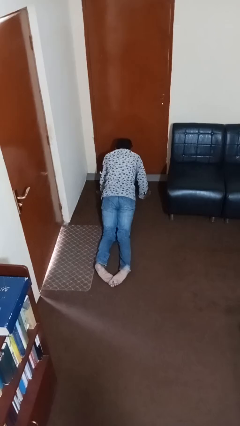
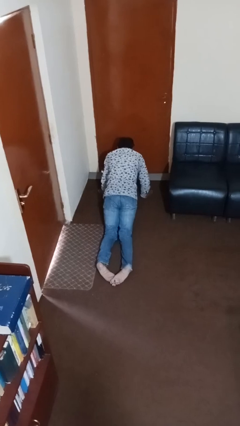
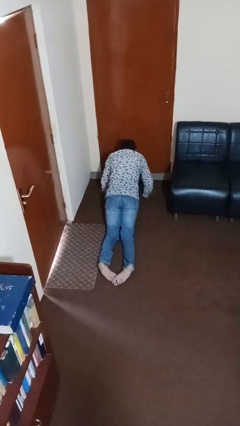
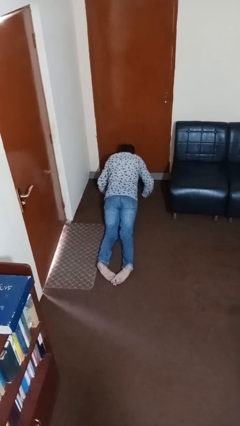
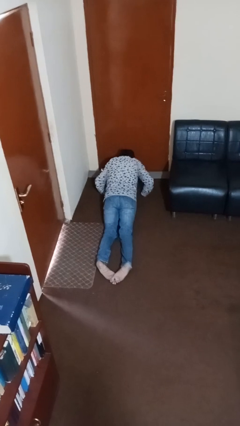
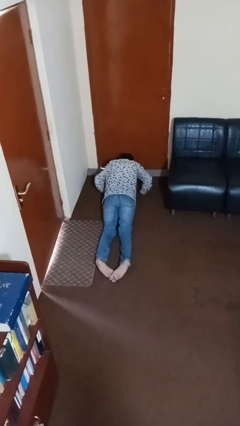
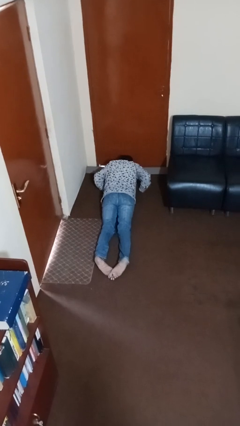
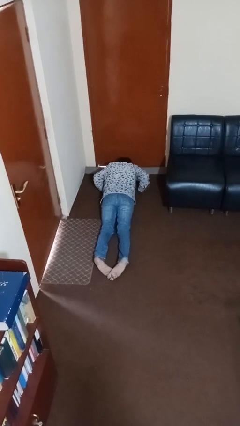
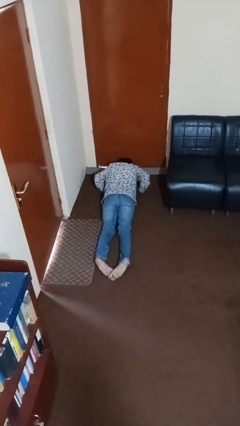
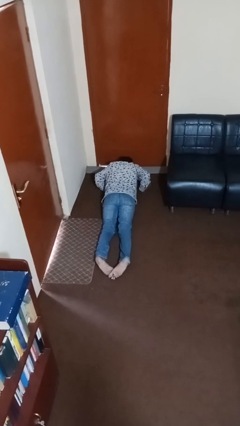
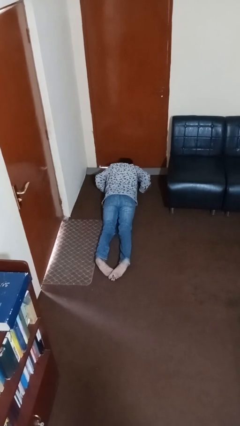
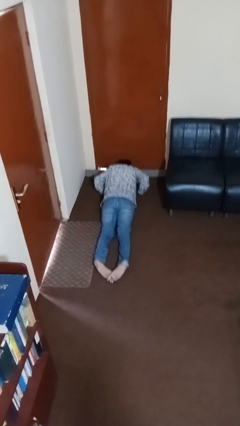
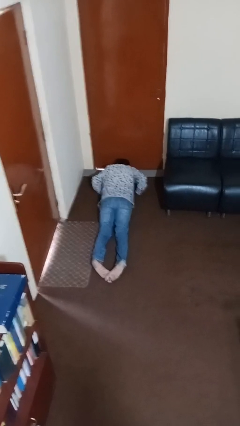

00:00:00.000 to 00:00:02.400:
person exercises with pushup

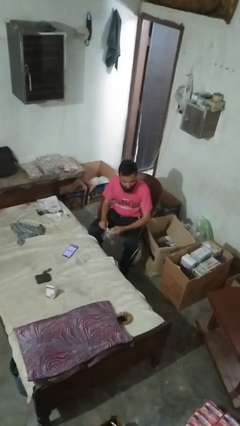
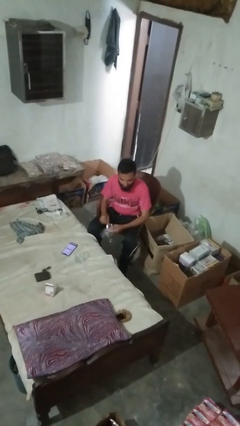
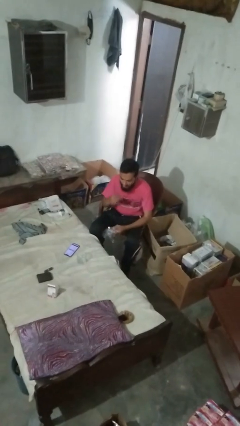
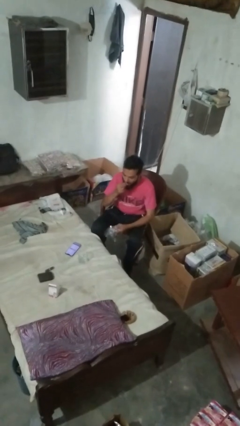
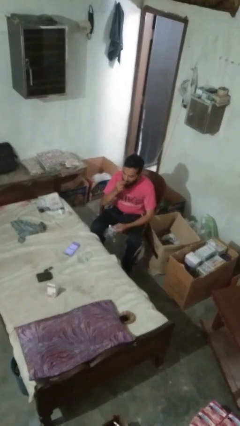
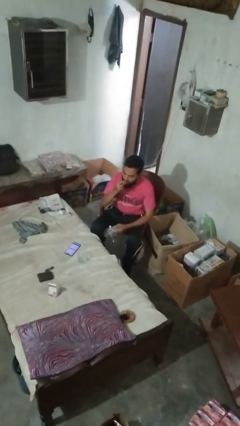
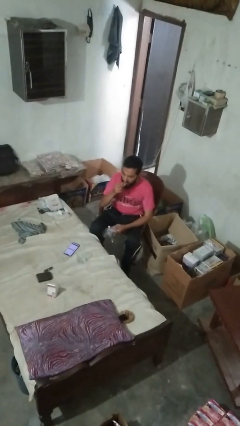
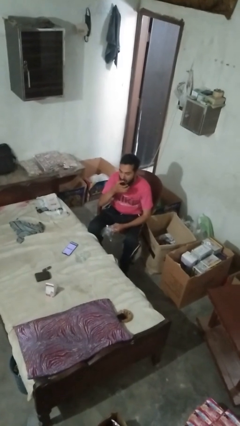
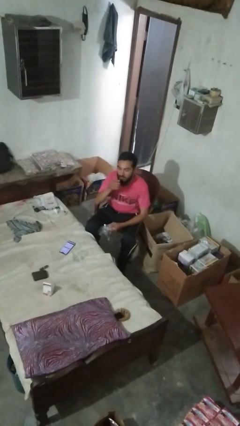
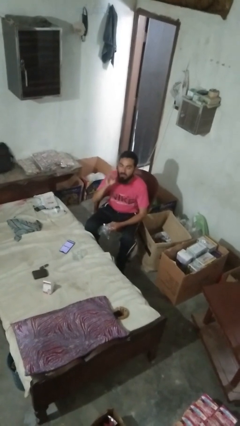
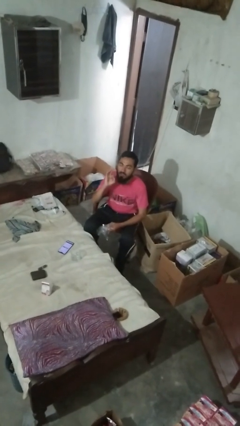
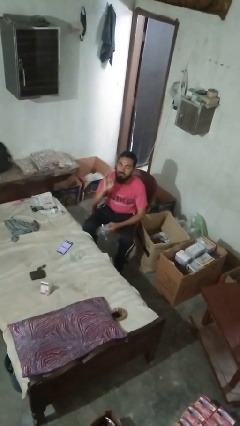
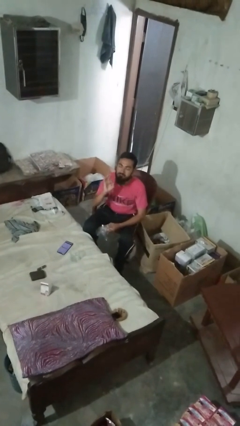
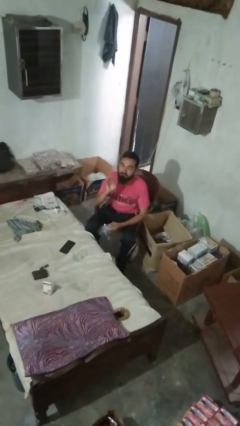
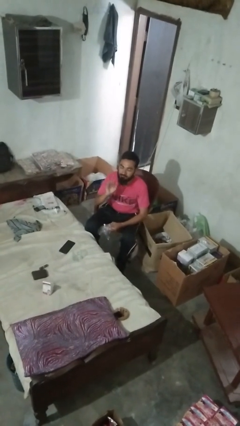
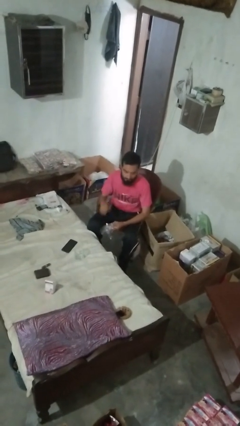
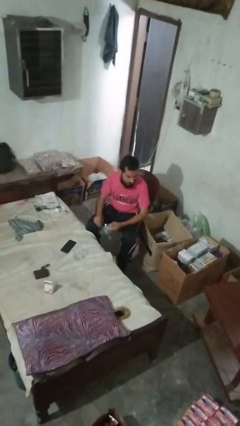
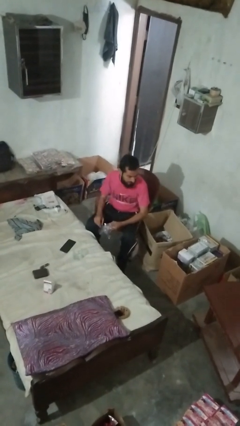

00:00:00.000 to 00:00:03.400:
person licks fingers

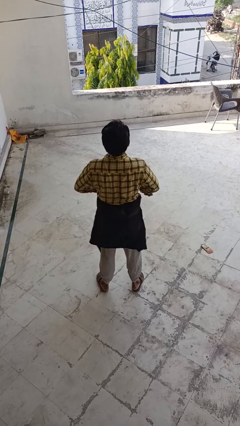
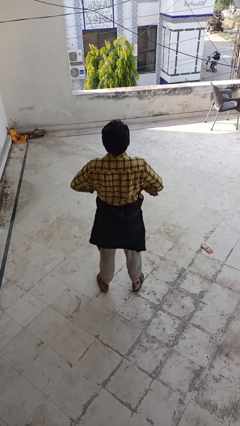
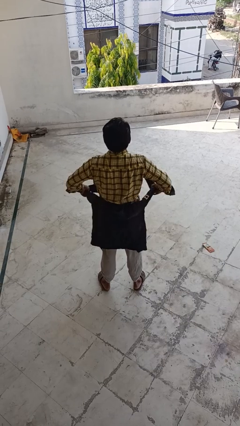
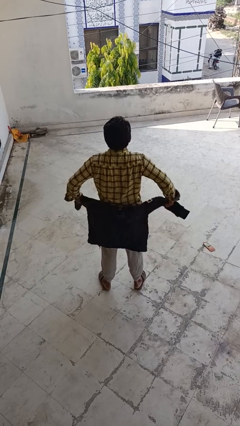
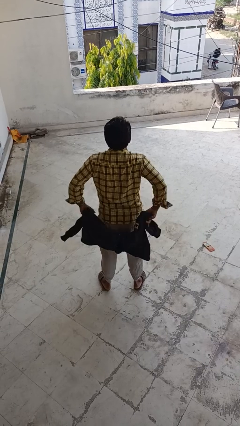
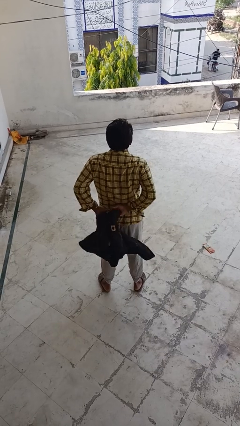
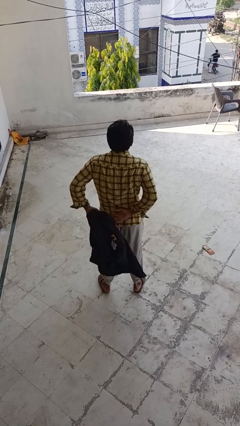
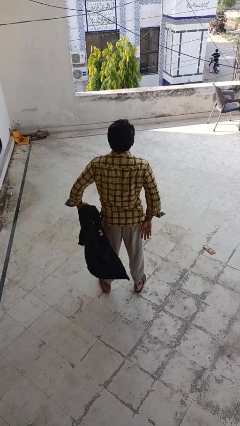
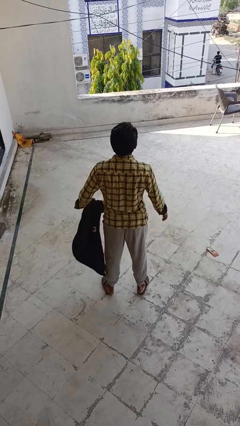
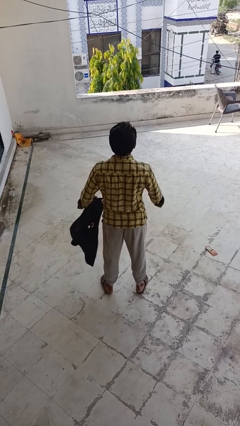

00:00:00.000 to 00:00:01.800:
person unties jacket around waist

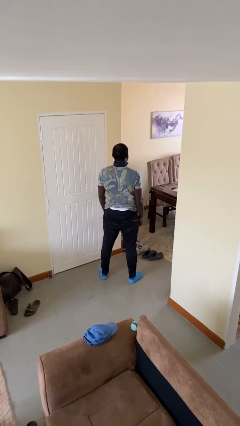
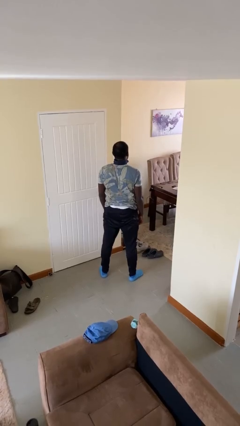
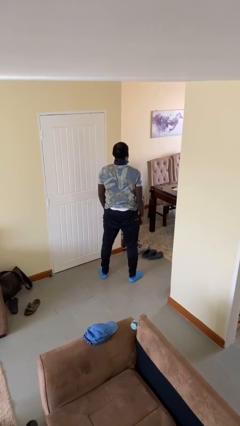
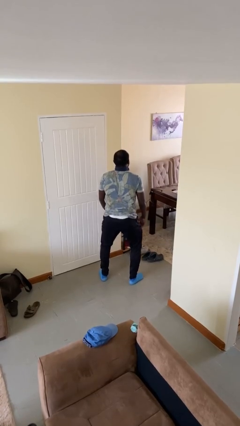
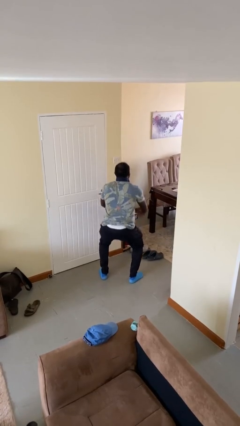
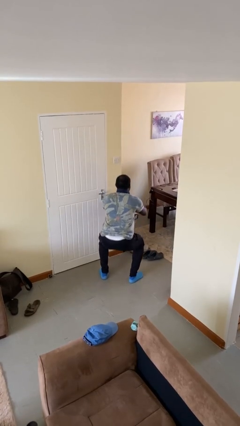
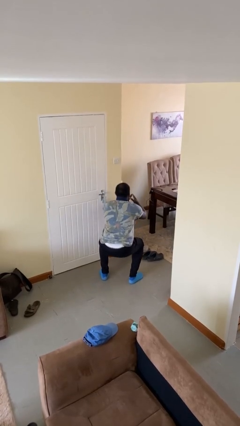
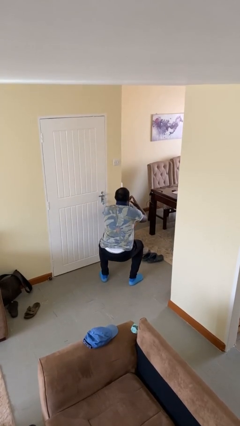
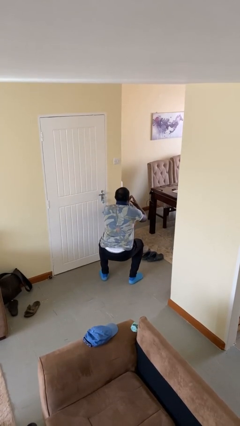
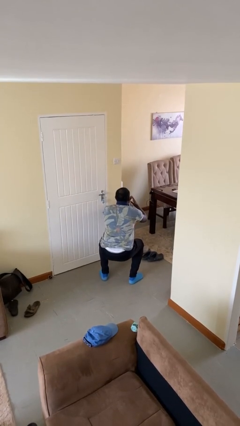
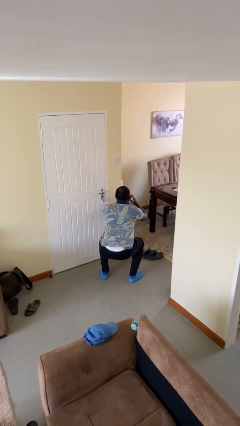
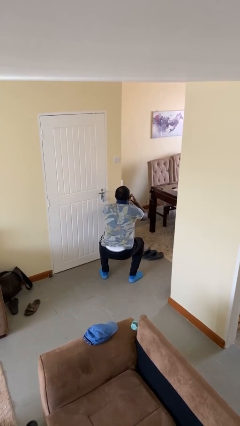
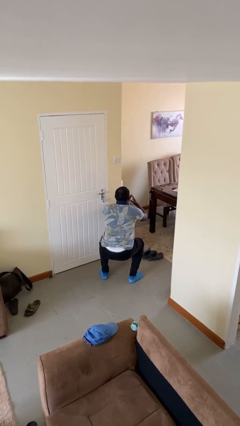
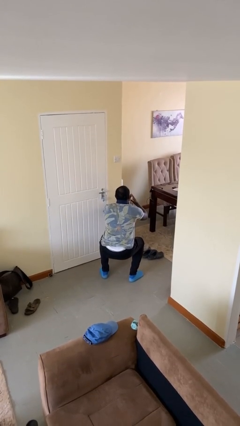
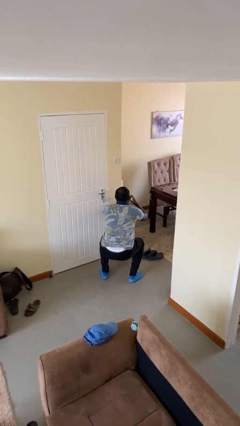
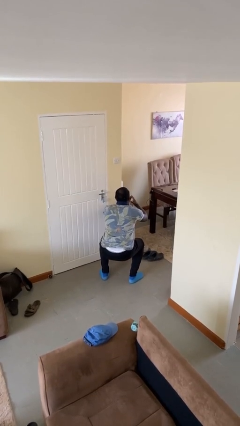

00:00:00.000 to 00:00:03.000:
person squats

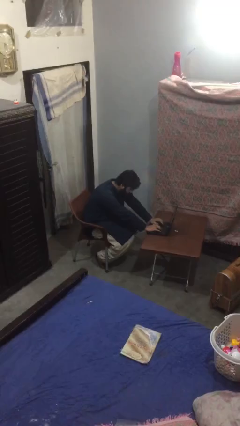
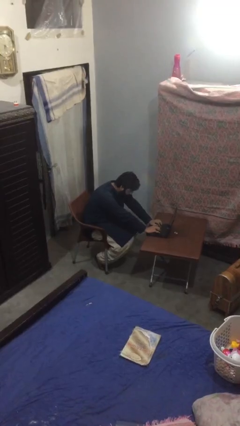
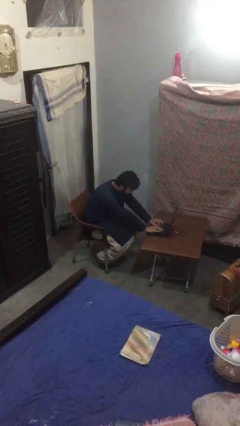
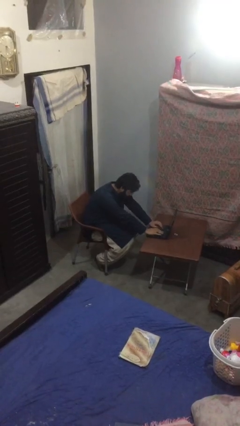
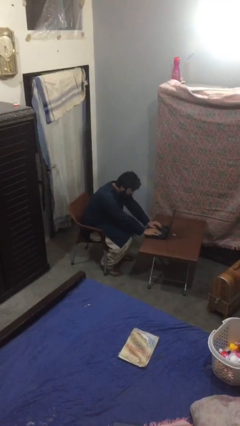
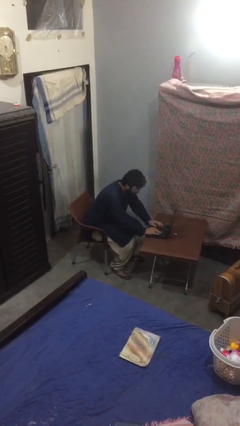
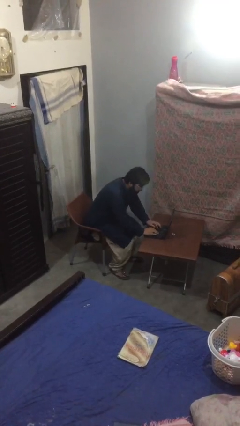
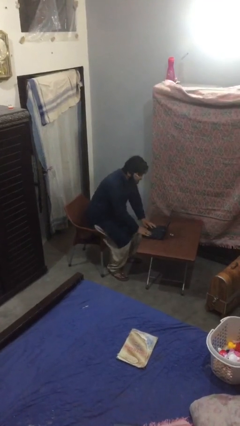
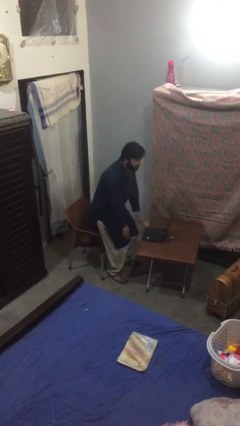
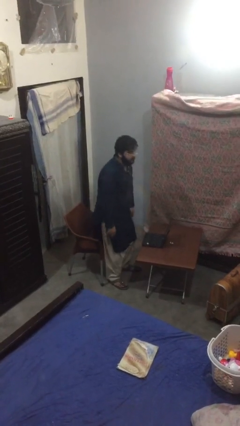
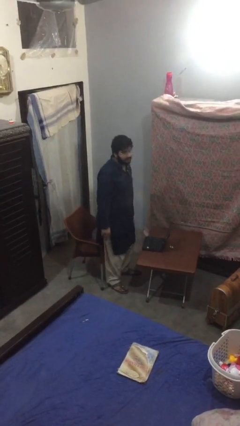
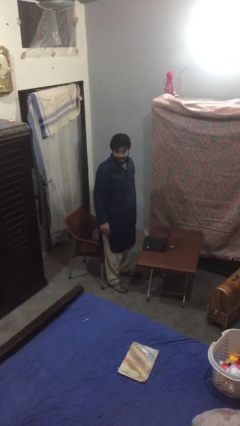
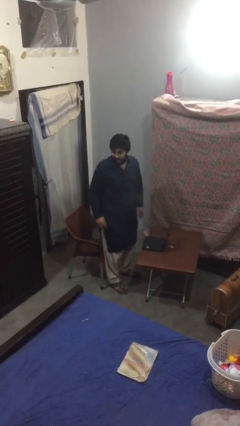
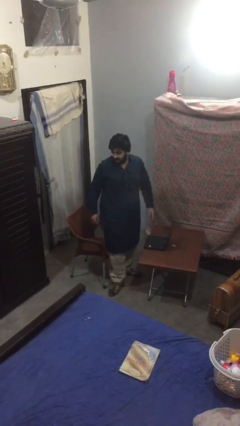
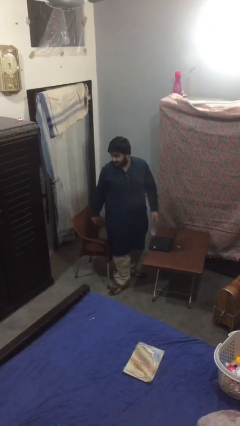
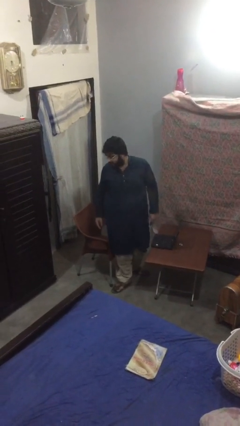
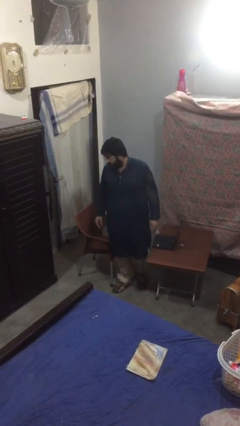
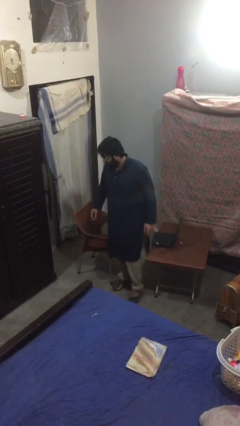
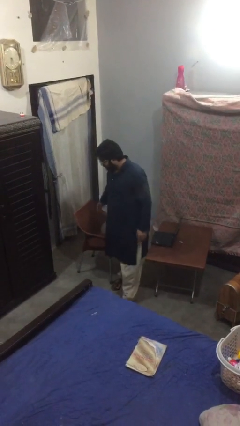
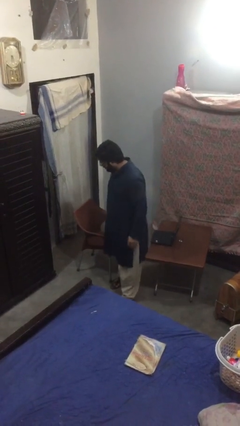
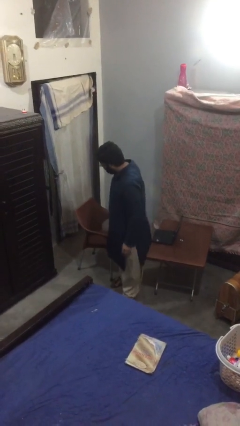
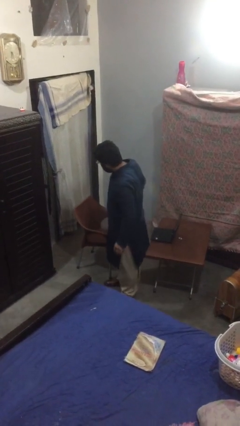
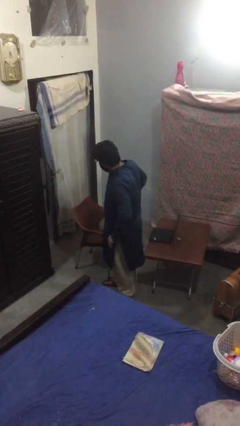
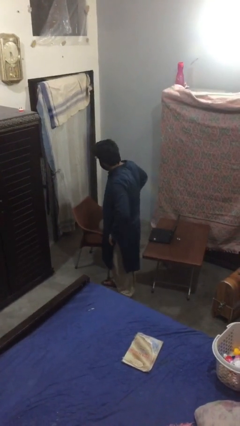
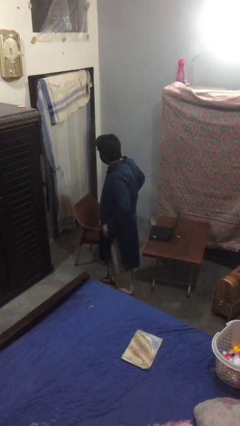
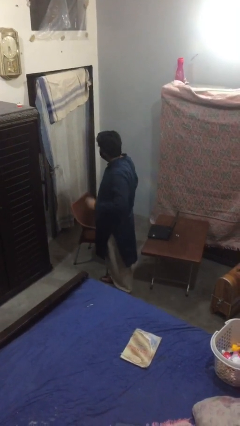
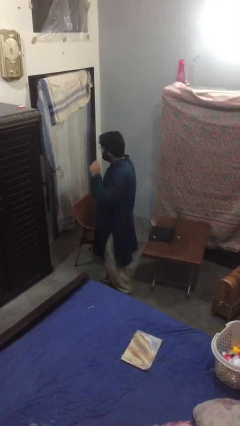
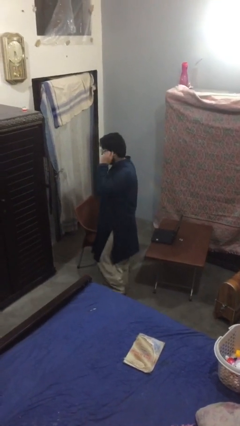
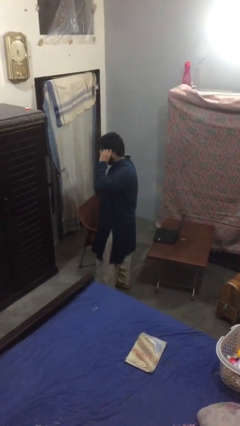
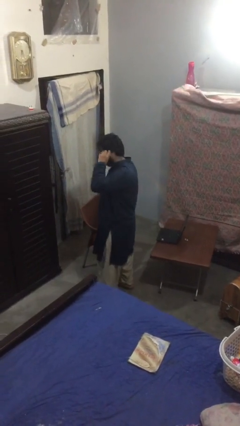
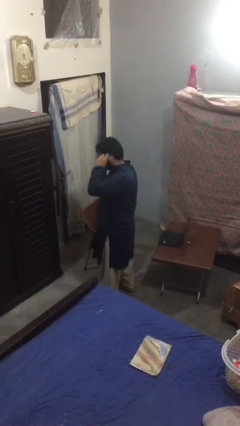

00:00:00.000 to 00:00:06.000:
person stands up

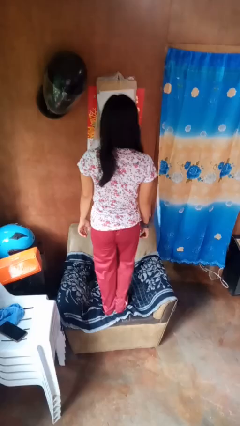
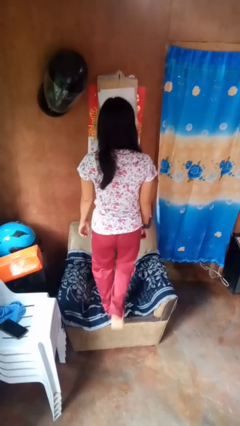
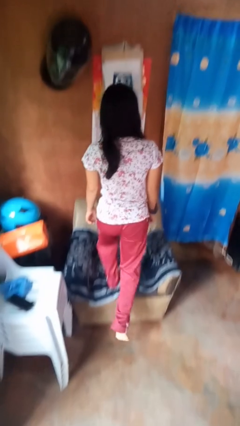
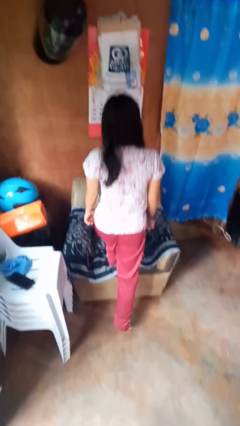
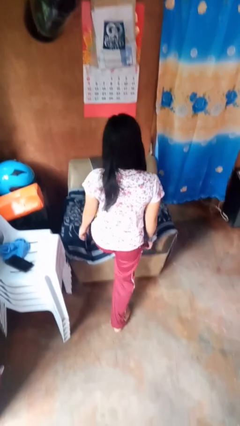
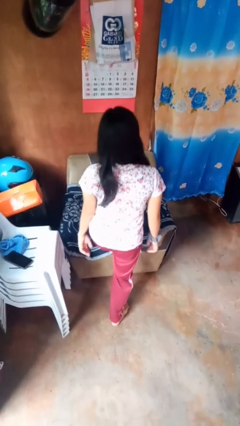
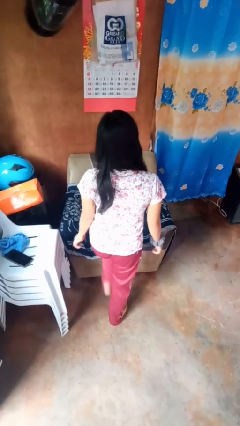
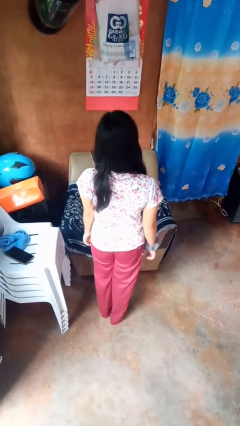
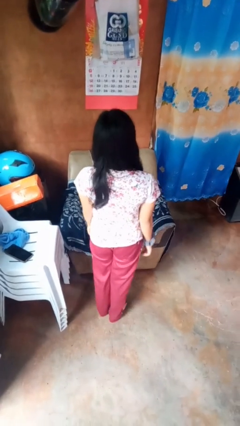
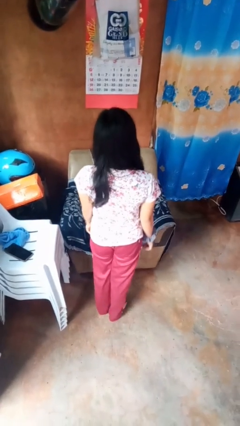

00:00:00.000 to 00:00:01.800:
person climbs off couch
